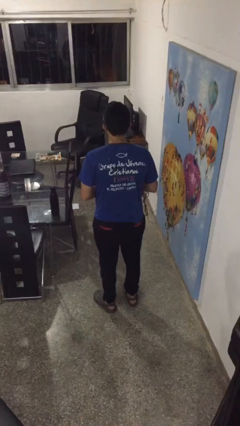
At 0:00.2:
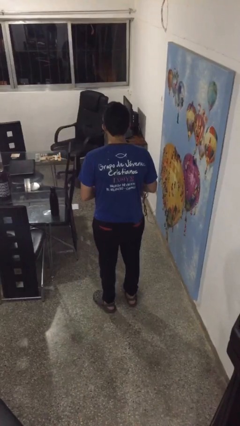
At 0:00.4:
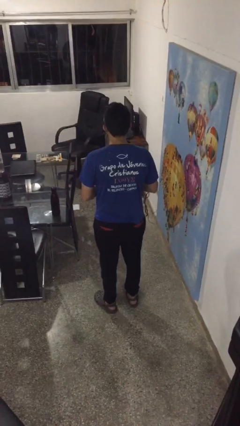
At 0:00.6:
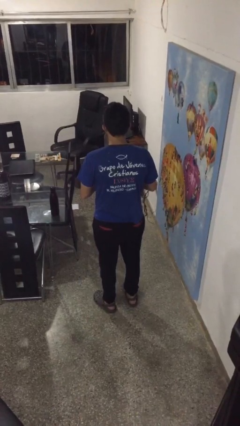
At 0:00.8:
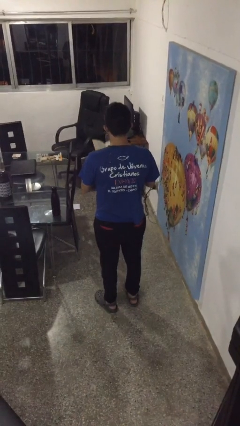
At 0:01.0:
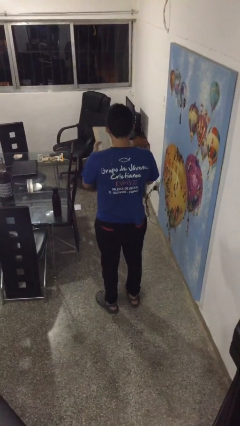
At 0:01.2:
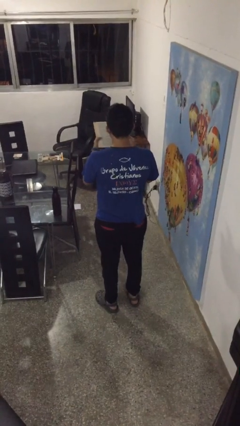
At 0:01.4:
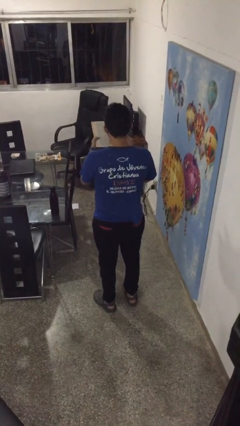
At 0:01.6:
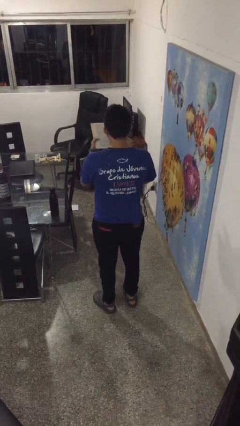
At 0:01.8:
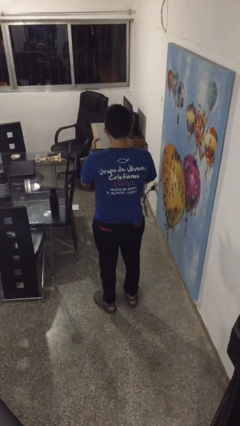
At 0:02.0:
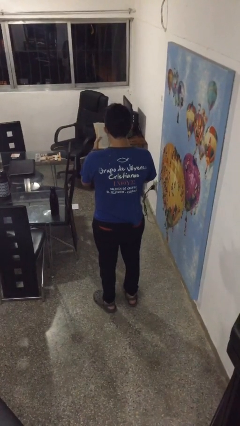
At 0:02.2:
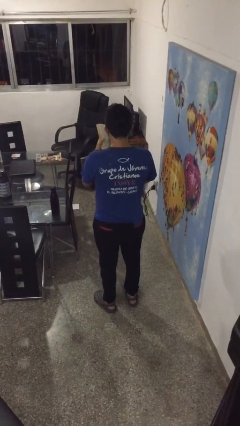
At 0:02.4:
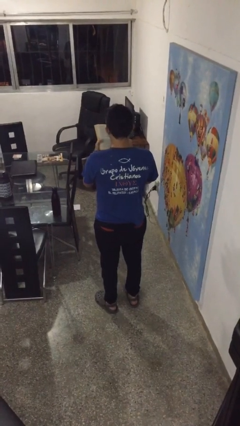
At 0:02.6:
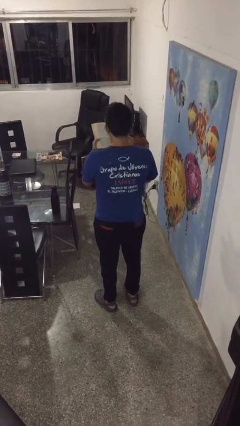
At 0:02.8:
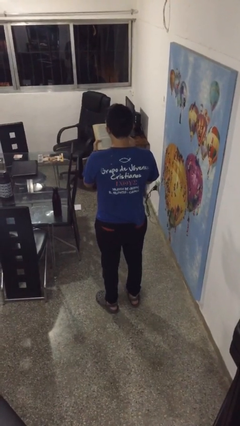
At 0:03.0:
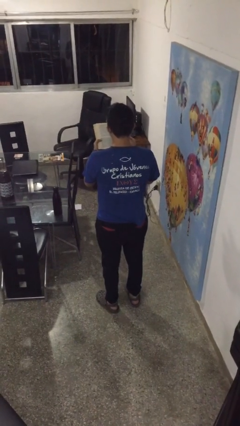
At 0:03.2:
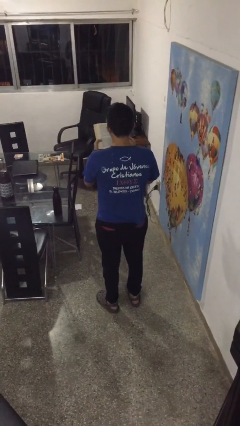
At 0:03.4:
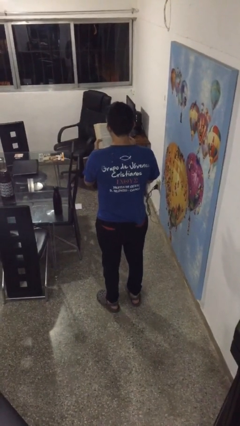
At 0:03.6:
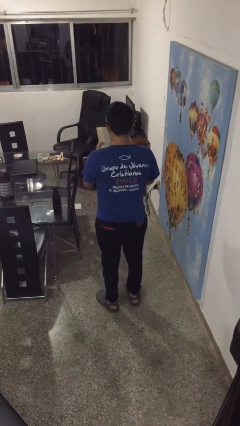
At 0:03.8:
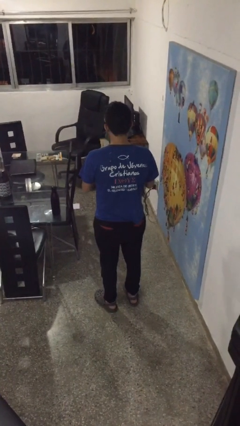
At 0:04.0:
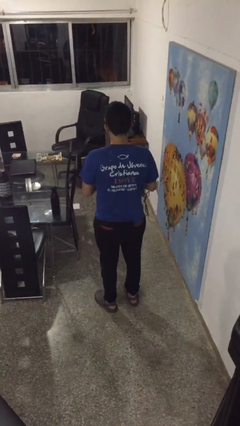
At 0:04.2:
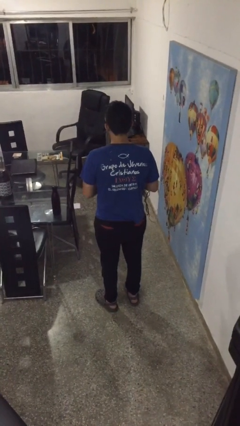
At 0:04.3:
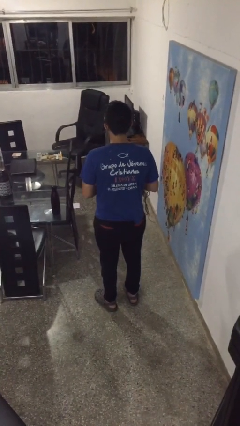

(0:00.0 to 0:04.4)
person reads book

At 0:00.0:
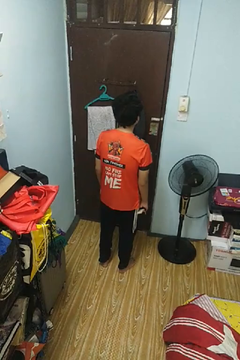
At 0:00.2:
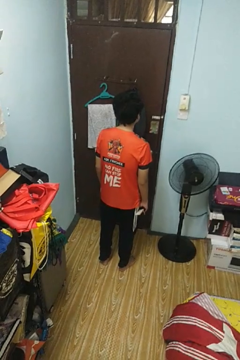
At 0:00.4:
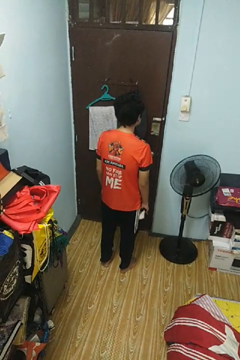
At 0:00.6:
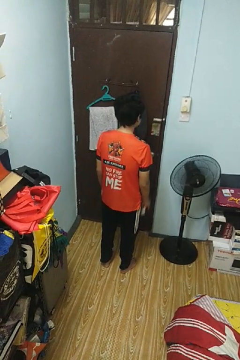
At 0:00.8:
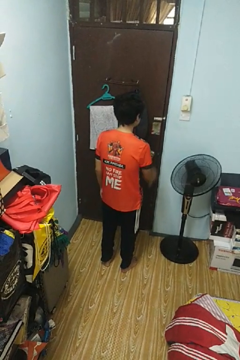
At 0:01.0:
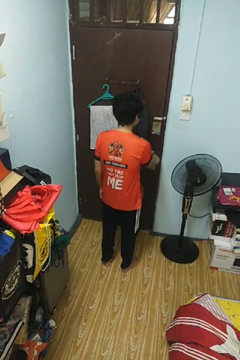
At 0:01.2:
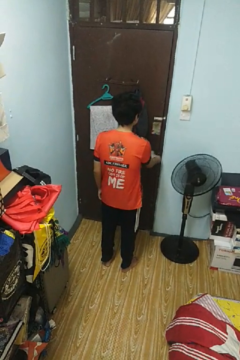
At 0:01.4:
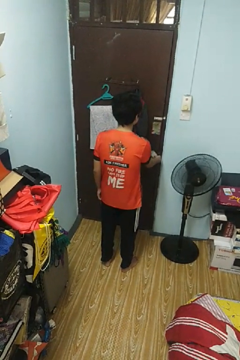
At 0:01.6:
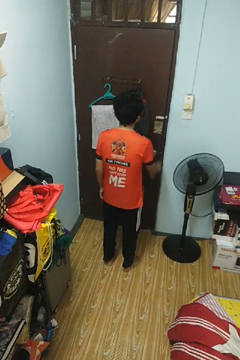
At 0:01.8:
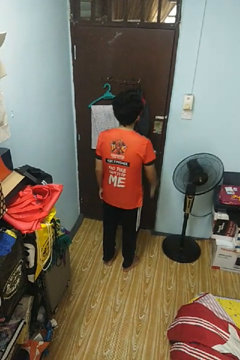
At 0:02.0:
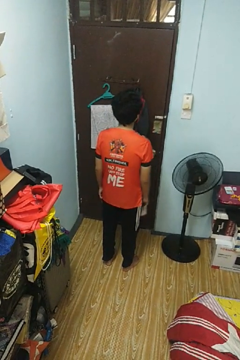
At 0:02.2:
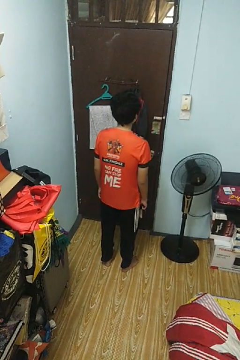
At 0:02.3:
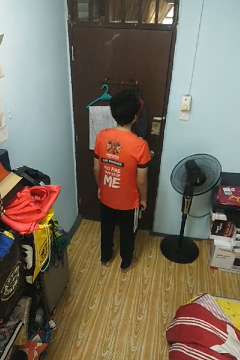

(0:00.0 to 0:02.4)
person unlocks door with keys

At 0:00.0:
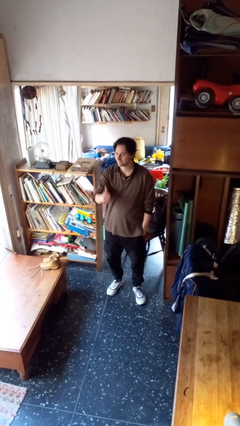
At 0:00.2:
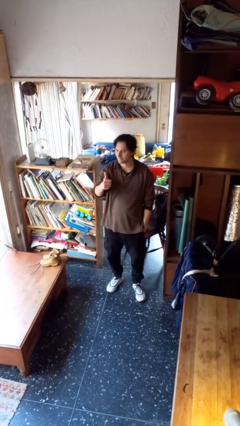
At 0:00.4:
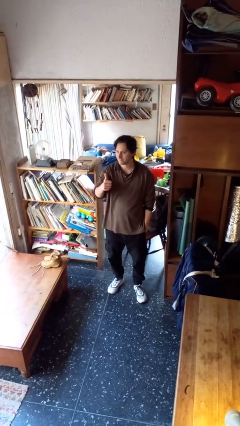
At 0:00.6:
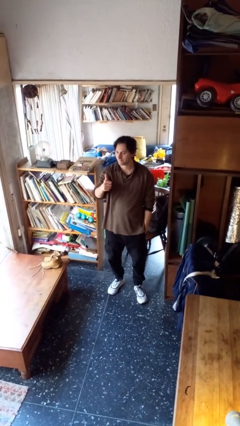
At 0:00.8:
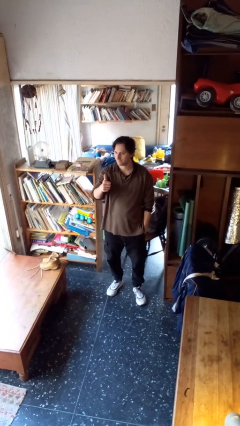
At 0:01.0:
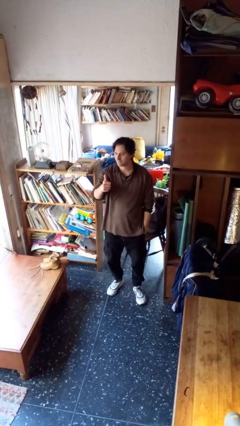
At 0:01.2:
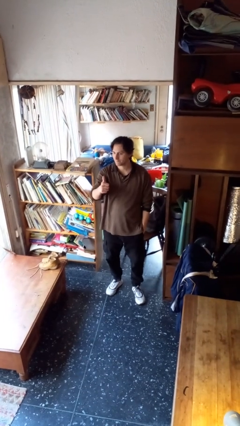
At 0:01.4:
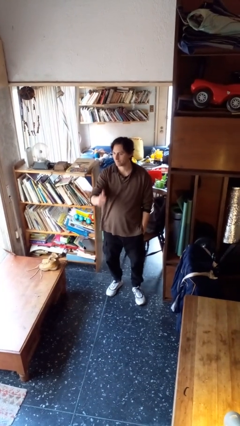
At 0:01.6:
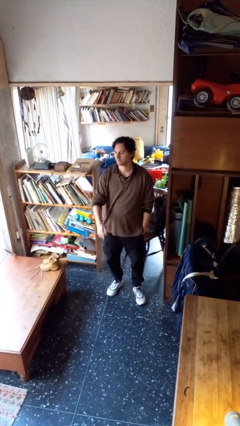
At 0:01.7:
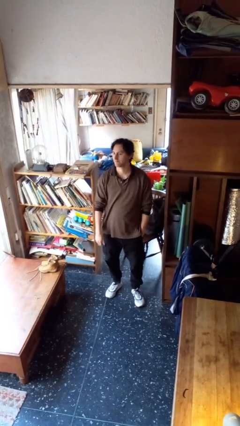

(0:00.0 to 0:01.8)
person gestures thumbs up

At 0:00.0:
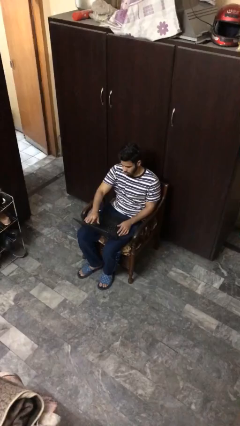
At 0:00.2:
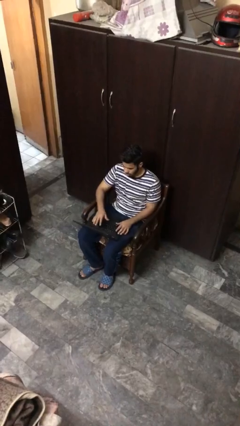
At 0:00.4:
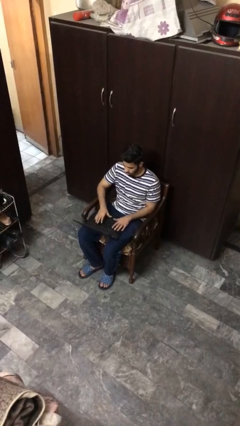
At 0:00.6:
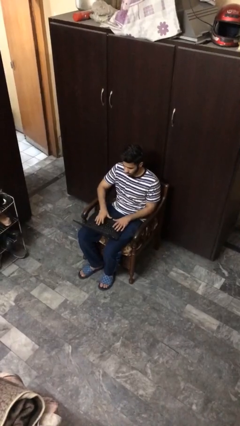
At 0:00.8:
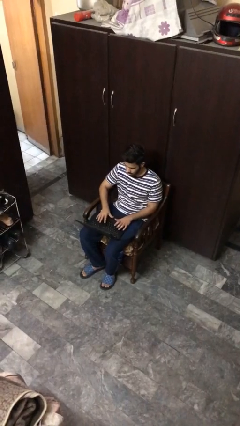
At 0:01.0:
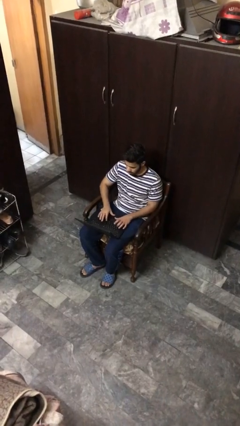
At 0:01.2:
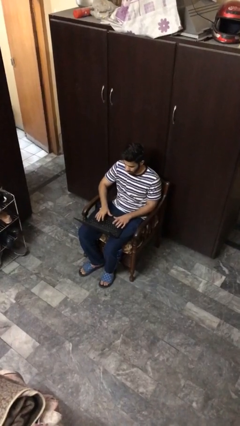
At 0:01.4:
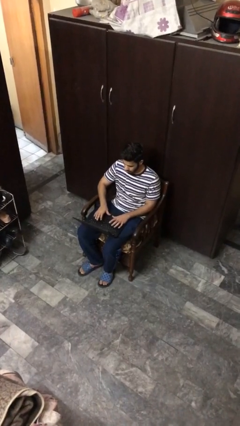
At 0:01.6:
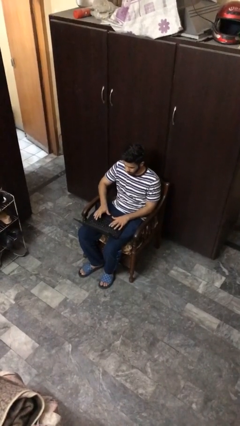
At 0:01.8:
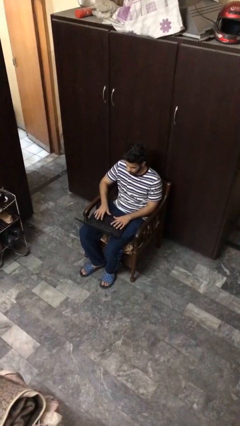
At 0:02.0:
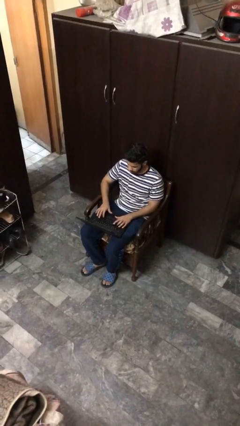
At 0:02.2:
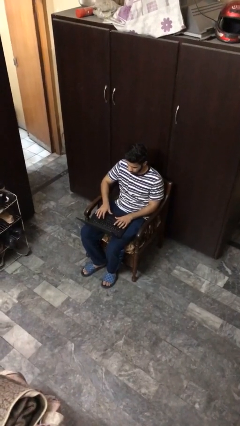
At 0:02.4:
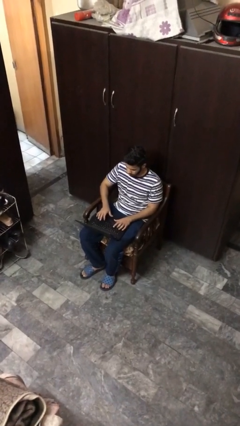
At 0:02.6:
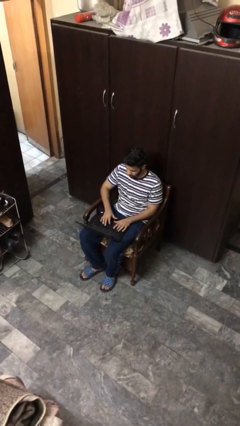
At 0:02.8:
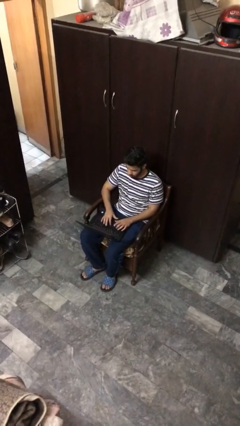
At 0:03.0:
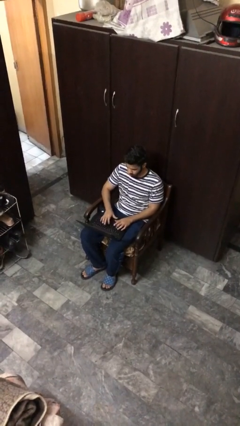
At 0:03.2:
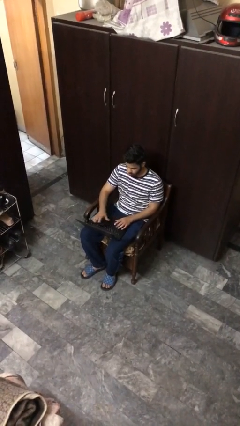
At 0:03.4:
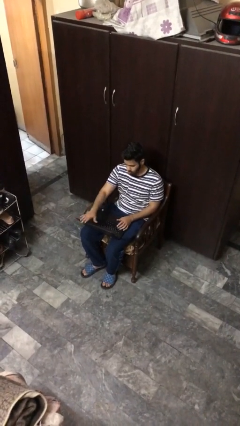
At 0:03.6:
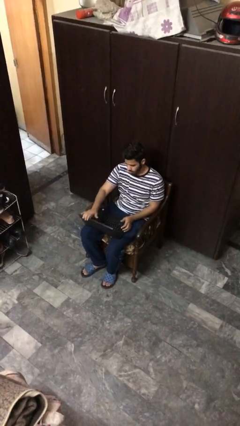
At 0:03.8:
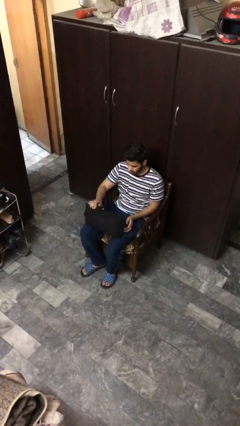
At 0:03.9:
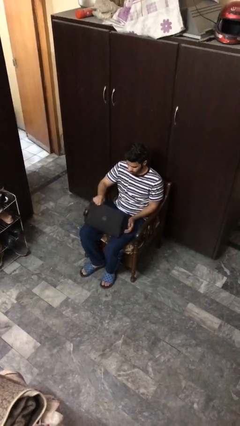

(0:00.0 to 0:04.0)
person interacts with laptop

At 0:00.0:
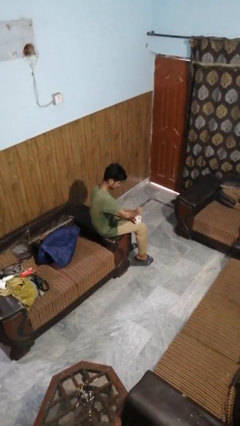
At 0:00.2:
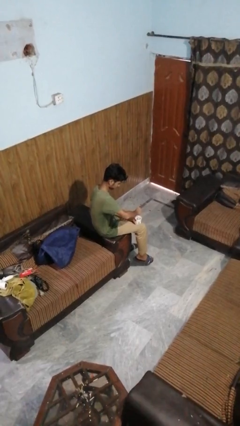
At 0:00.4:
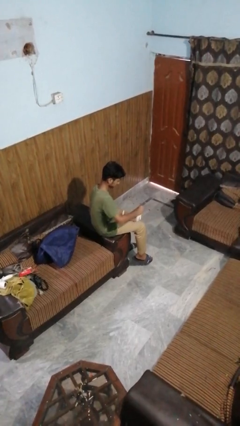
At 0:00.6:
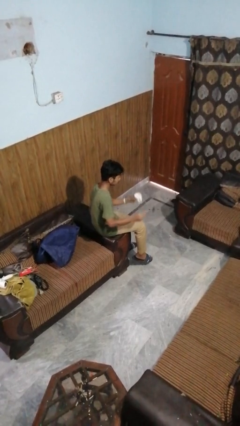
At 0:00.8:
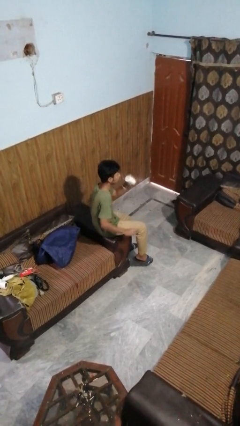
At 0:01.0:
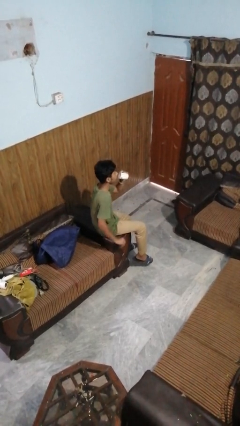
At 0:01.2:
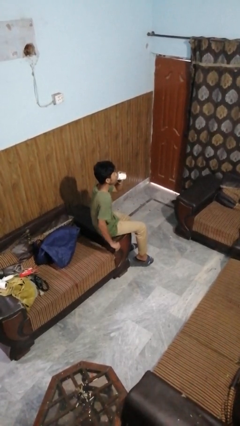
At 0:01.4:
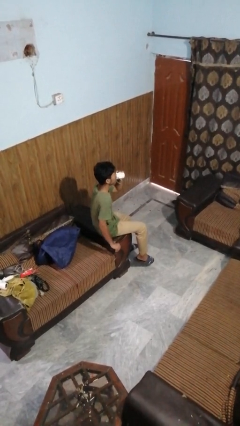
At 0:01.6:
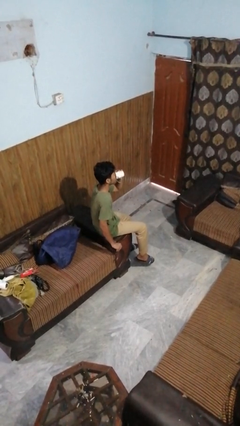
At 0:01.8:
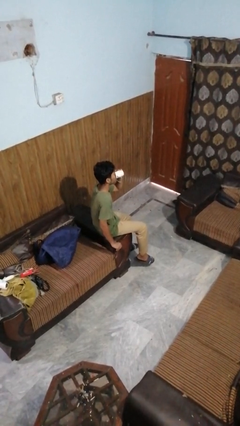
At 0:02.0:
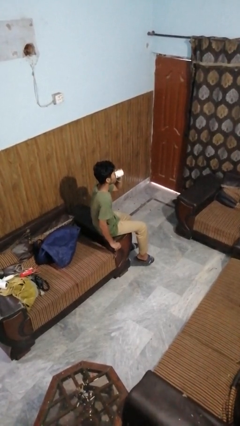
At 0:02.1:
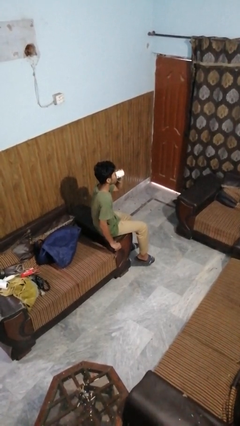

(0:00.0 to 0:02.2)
person drinks from mug

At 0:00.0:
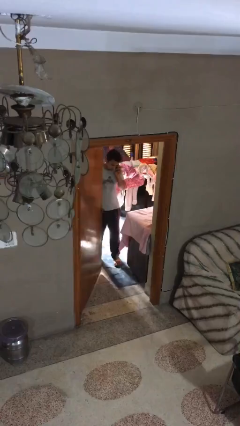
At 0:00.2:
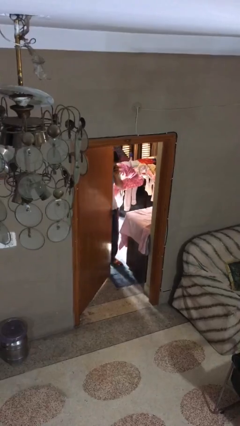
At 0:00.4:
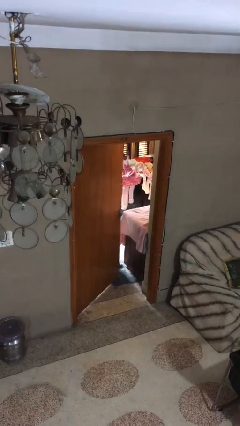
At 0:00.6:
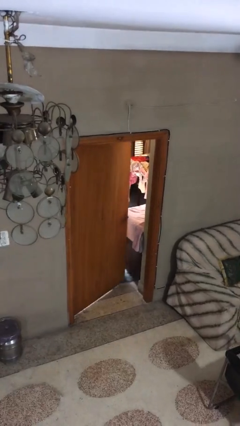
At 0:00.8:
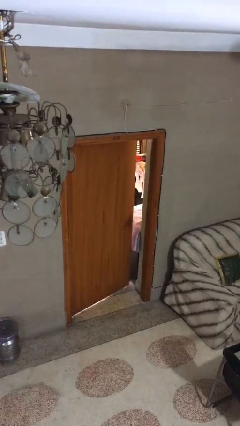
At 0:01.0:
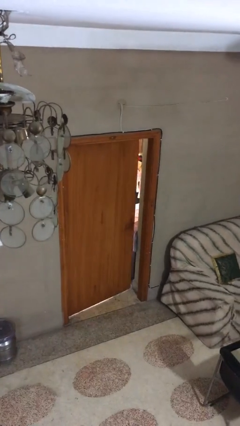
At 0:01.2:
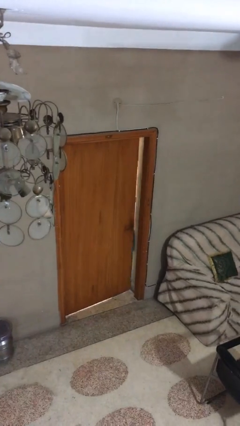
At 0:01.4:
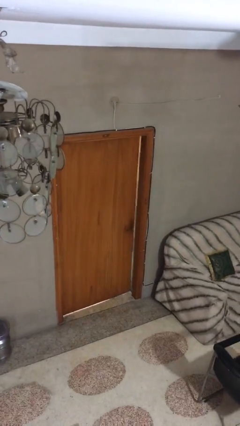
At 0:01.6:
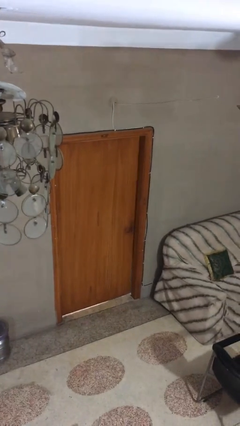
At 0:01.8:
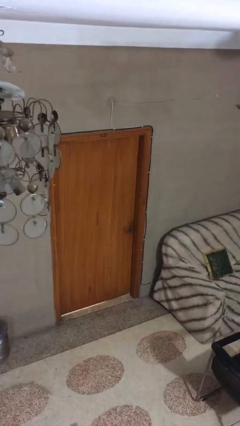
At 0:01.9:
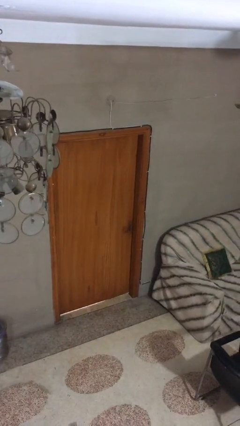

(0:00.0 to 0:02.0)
person closes facility door

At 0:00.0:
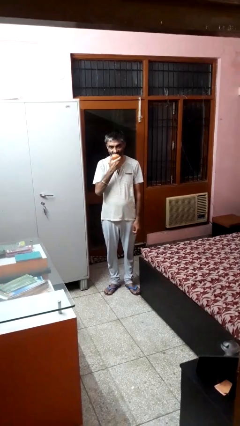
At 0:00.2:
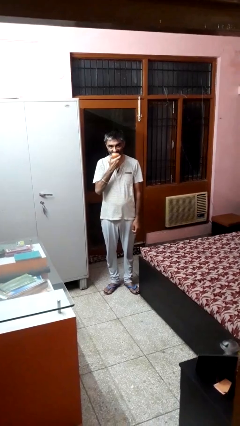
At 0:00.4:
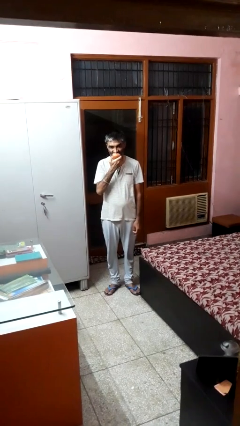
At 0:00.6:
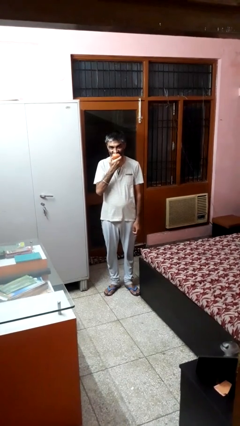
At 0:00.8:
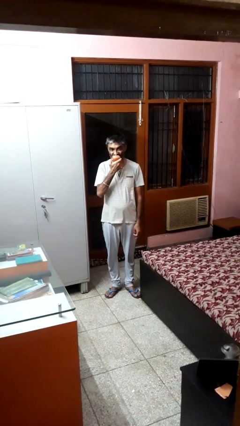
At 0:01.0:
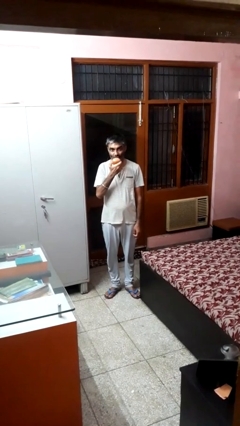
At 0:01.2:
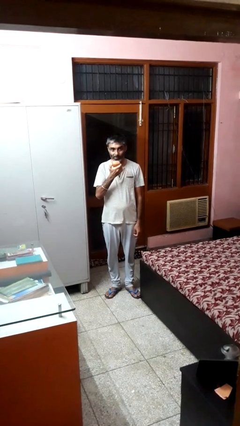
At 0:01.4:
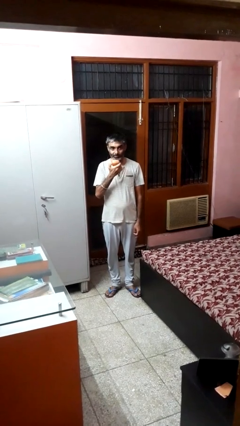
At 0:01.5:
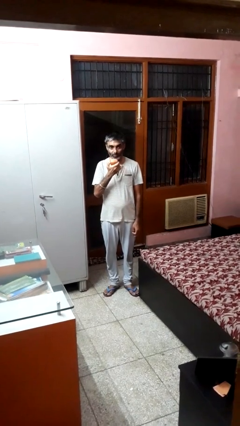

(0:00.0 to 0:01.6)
person eats apple
